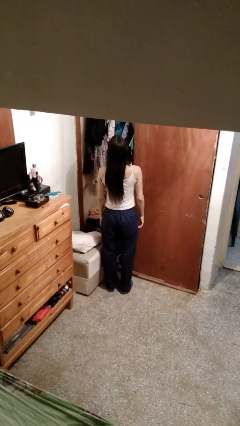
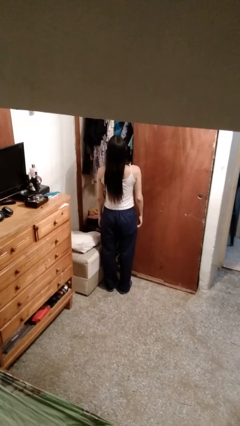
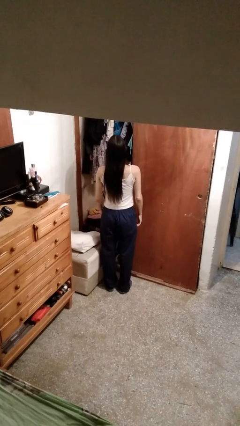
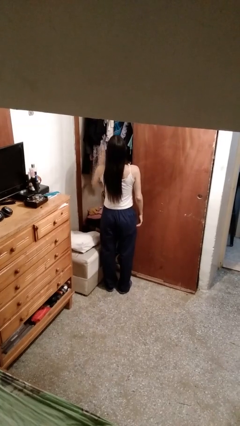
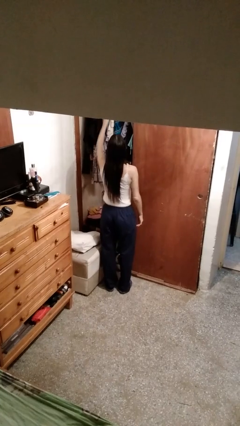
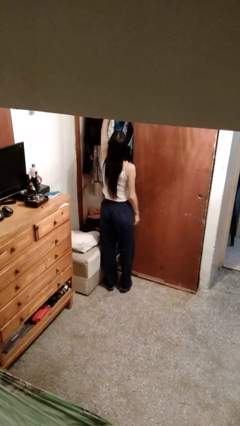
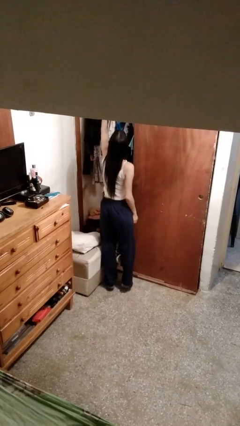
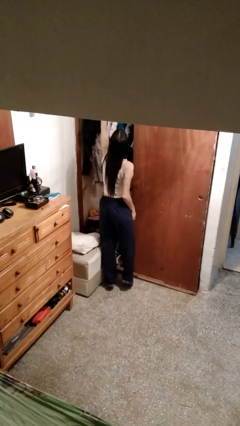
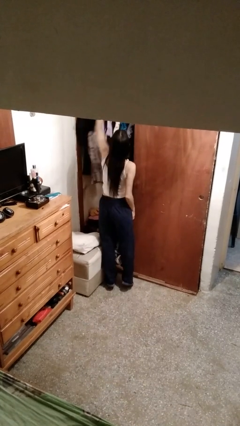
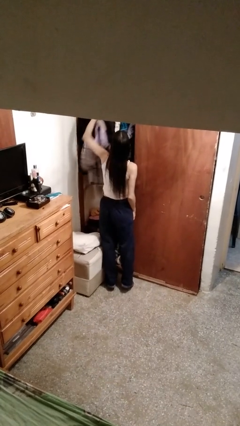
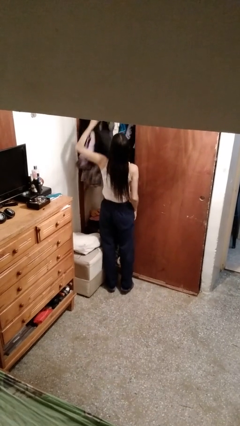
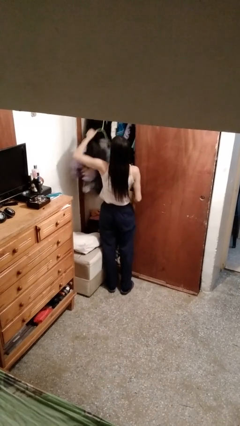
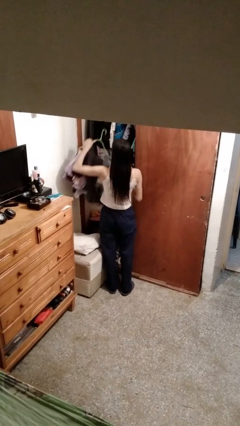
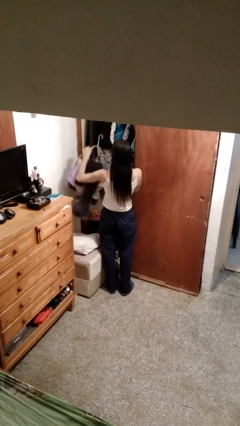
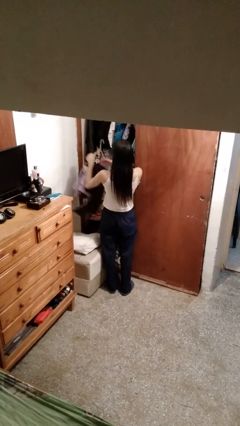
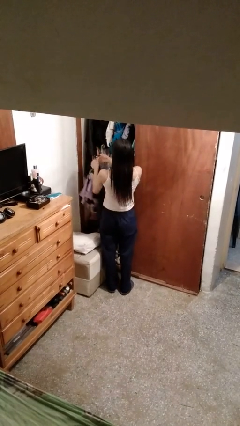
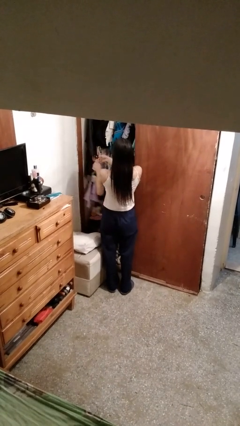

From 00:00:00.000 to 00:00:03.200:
person takes clothes from closet

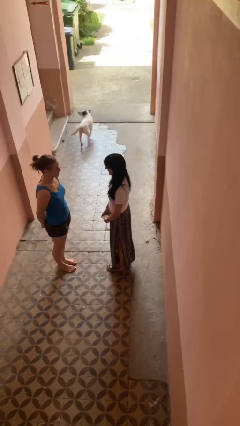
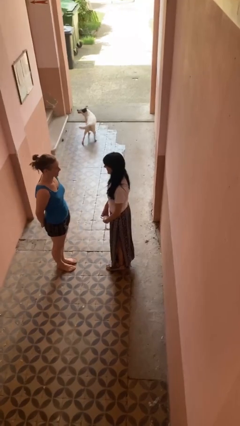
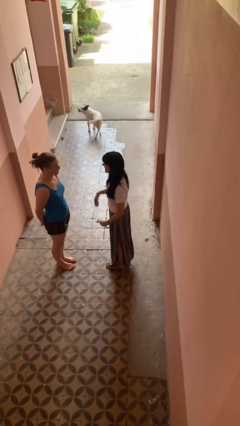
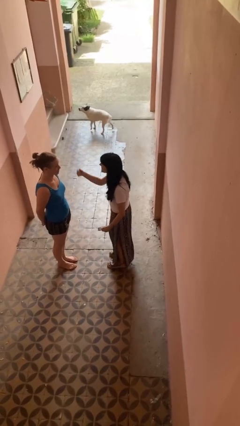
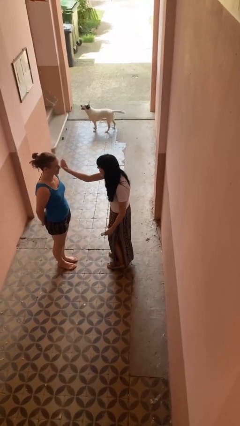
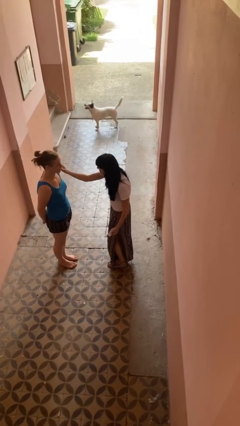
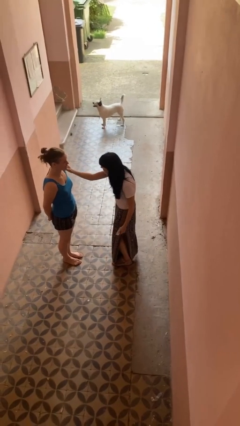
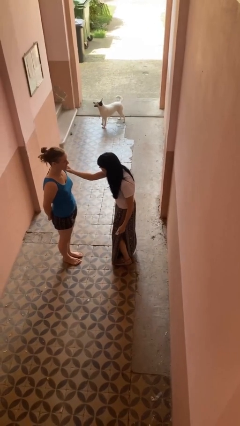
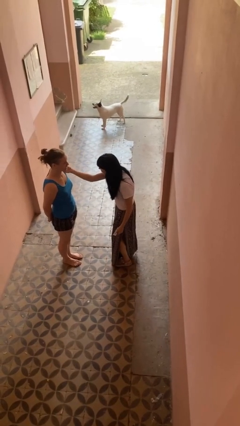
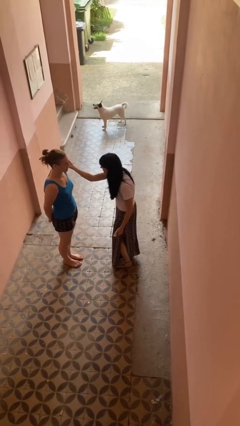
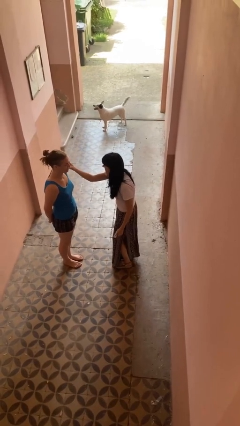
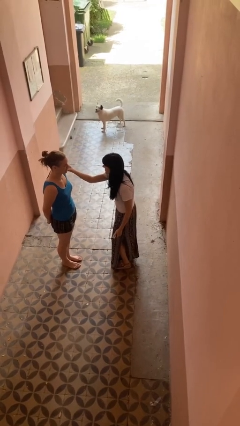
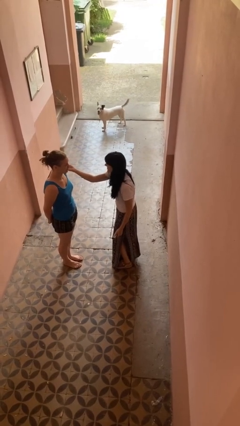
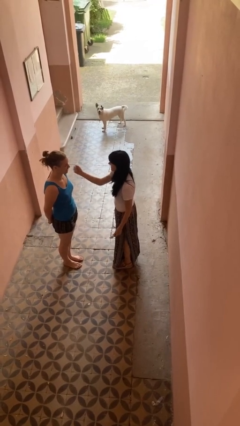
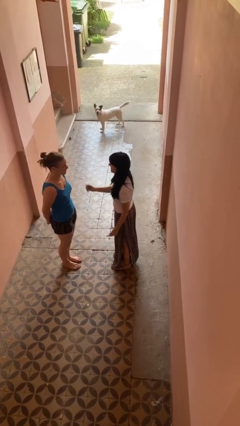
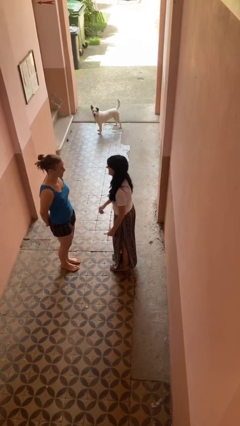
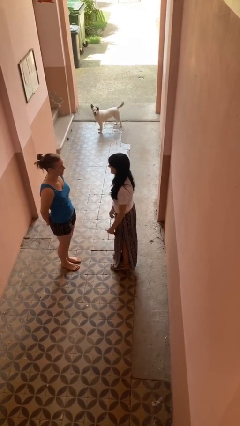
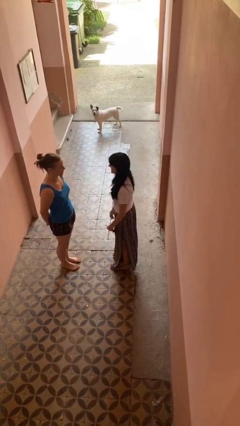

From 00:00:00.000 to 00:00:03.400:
person touches face of person

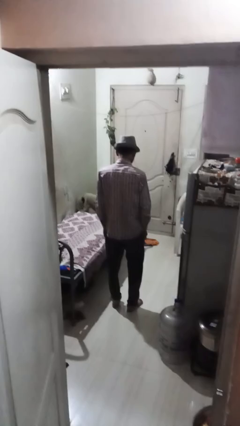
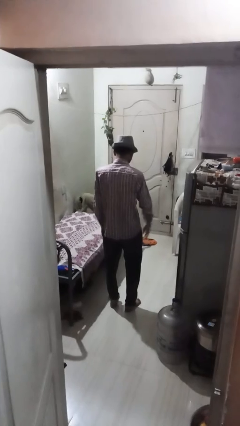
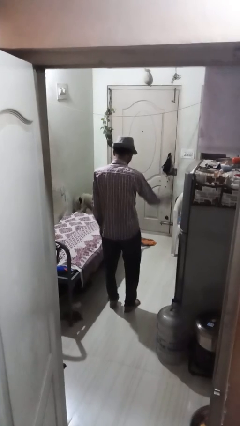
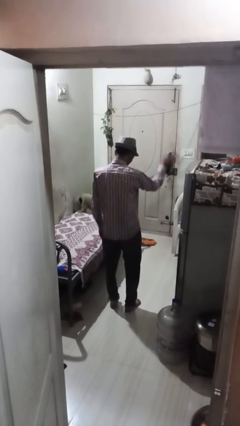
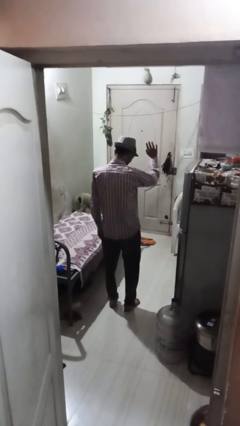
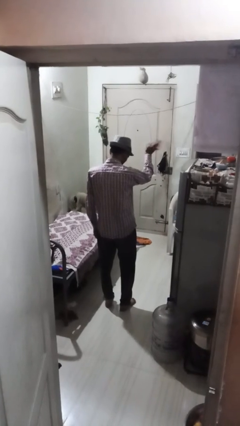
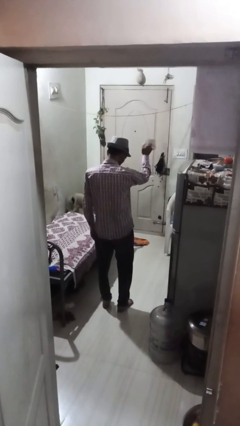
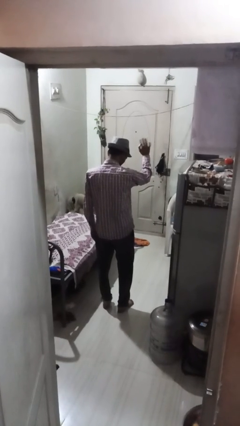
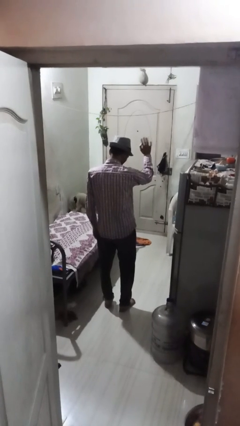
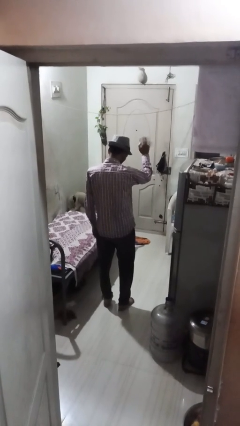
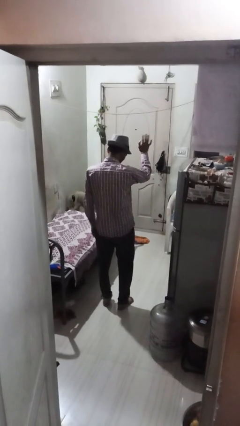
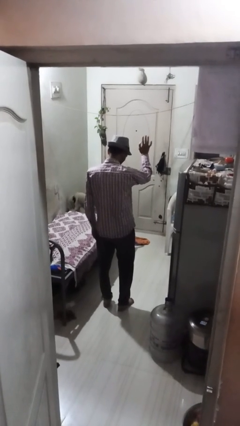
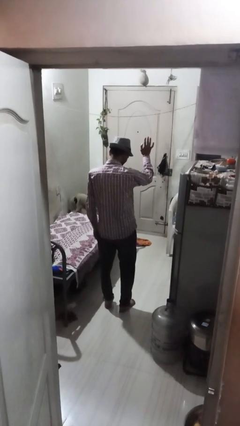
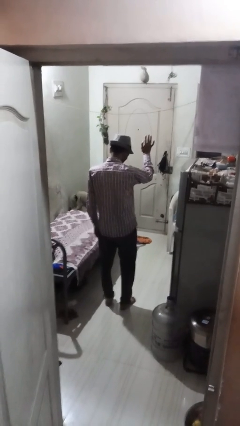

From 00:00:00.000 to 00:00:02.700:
person waves at person

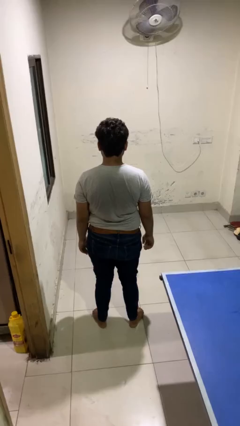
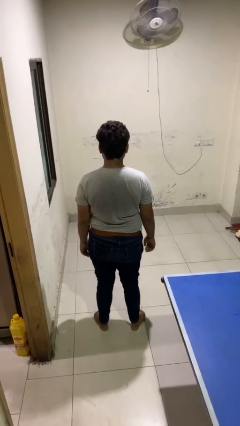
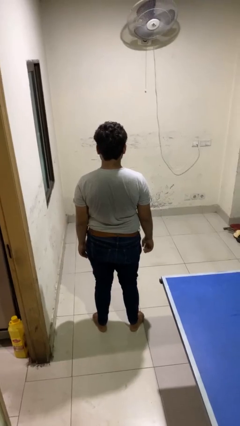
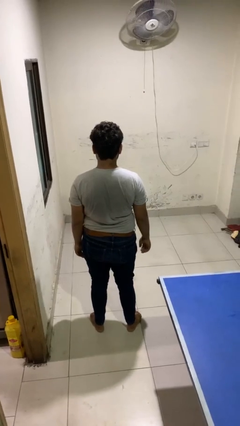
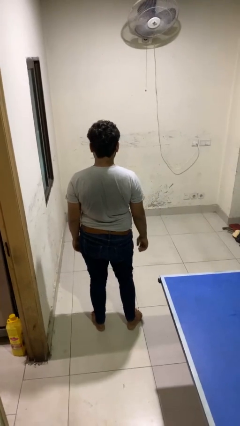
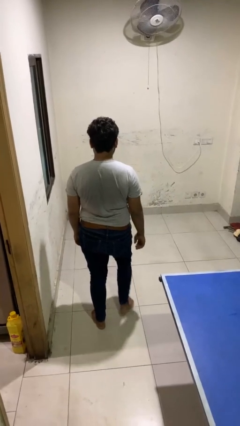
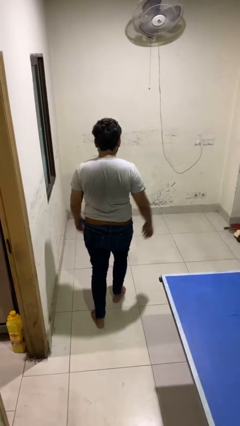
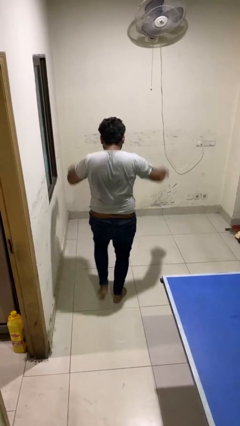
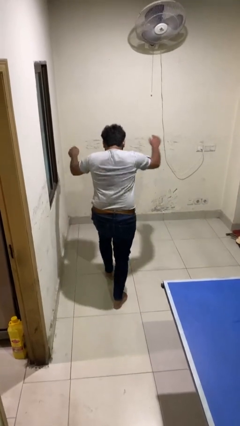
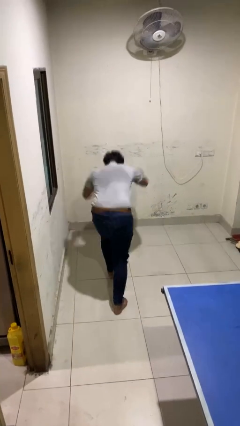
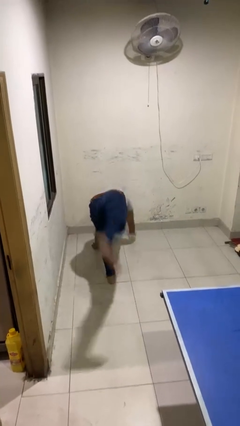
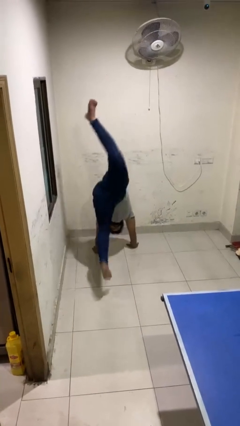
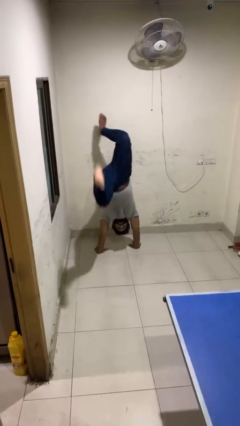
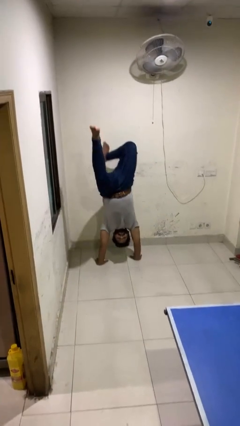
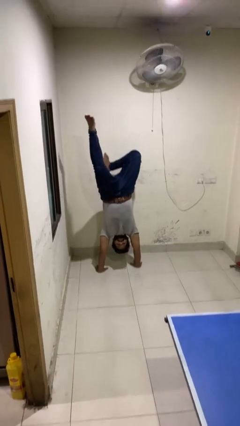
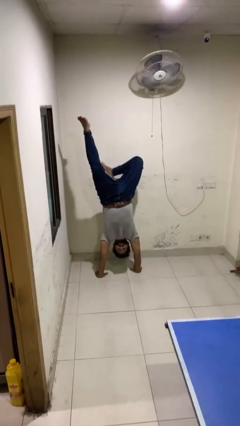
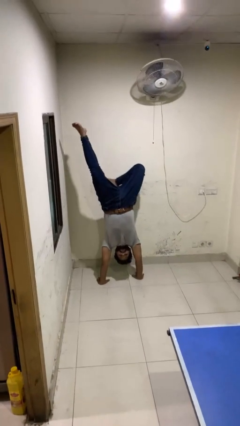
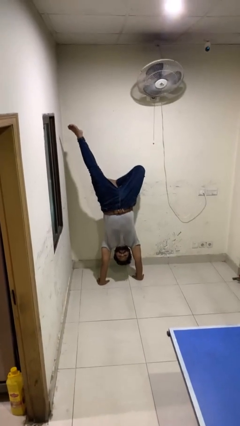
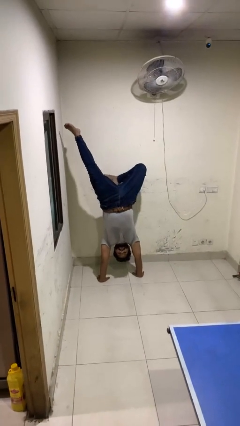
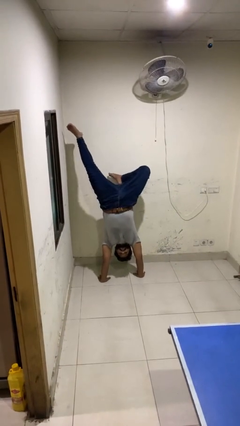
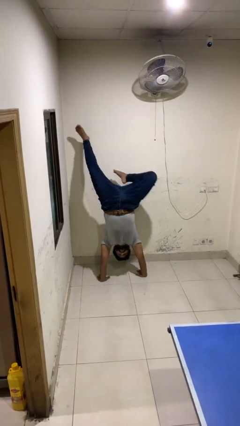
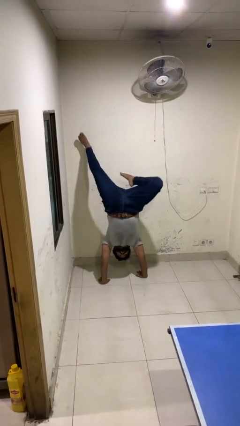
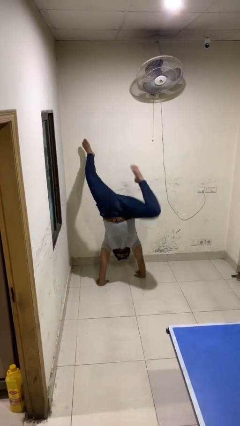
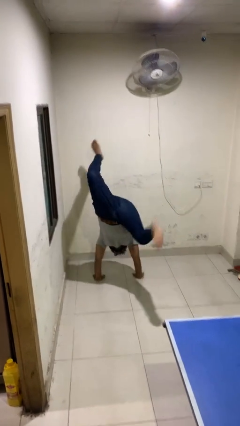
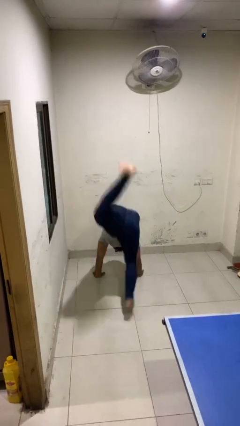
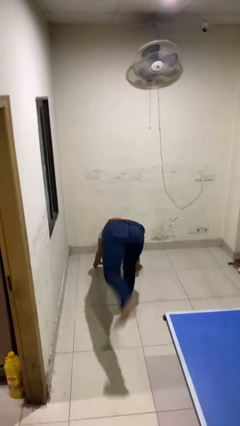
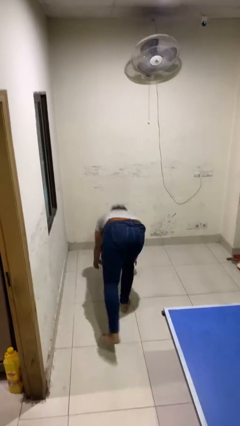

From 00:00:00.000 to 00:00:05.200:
person handstand

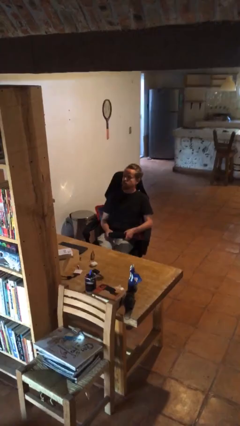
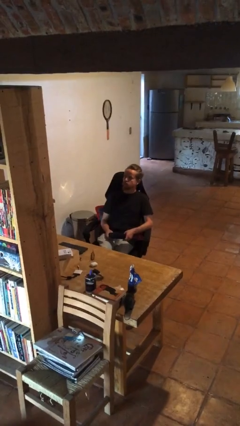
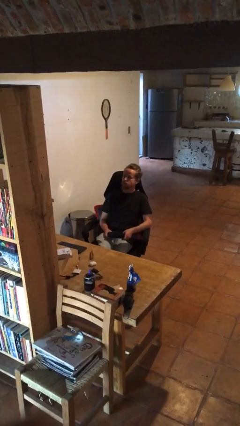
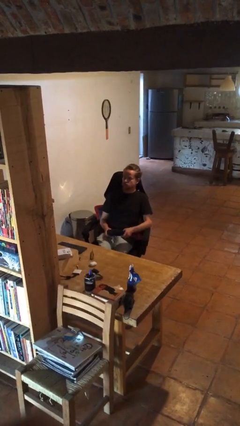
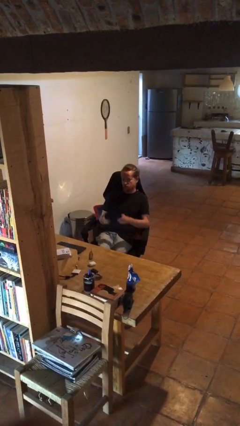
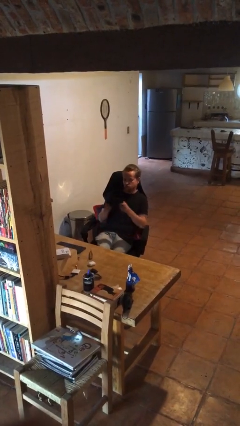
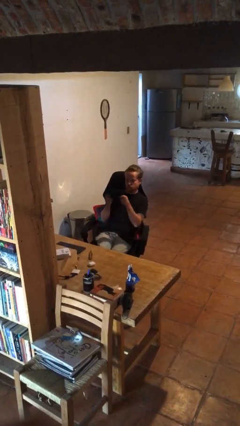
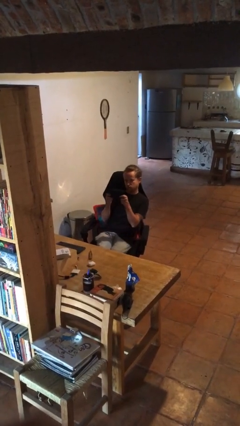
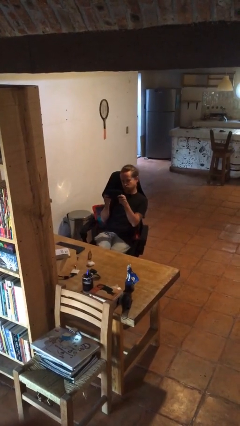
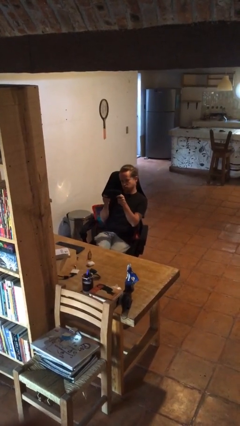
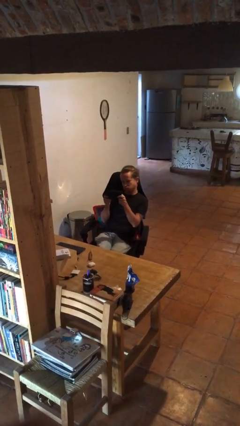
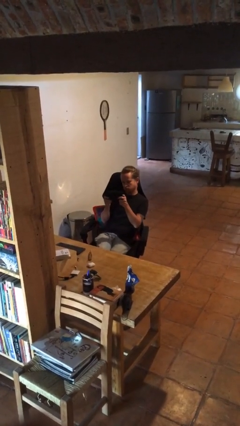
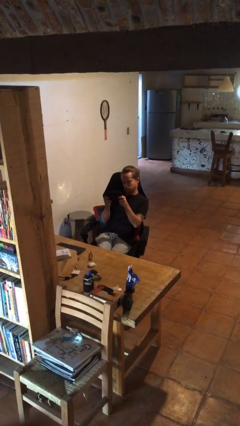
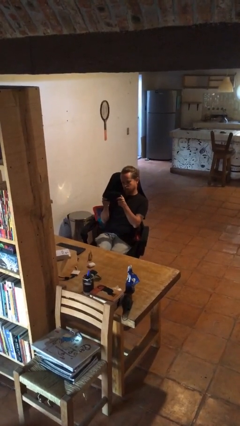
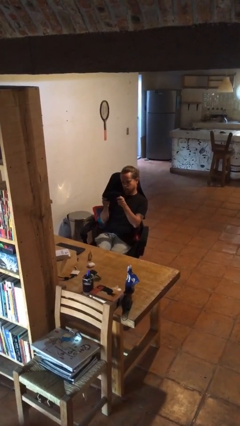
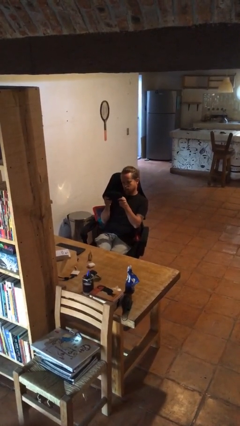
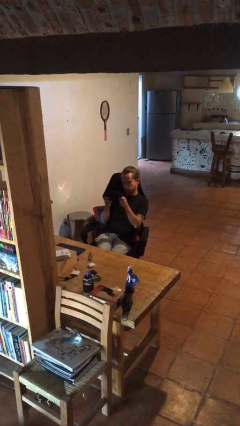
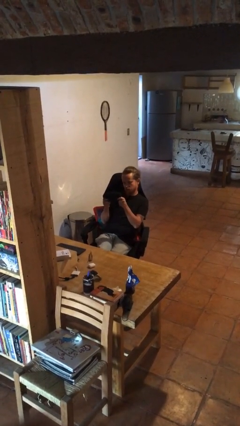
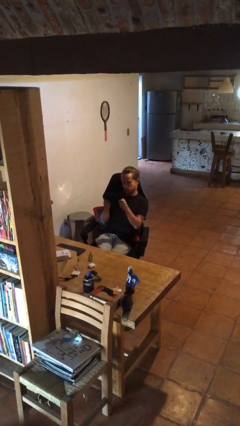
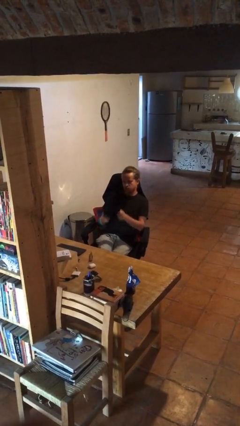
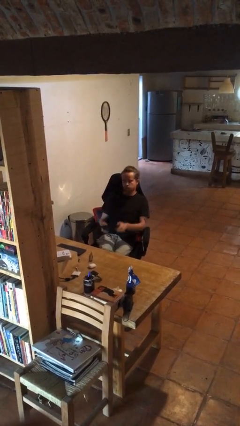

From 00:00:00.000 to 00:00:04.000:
person interacts with handheld game
